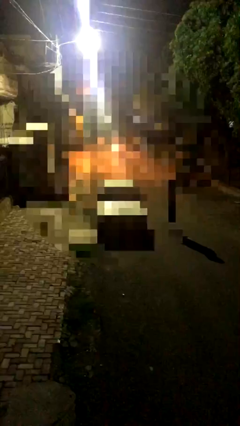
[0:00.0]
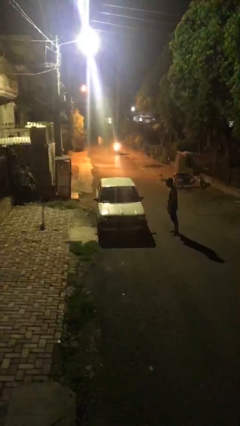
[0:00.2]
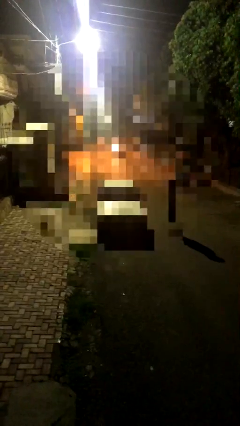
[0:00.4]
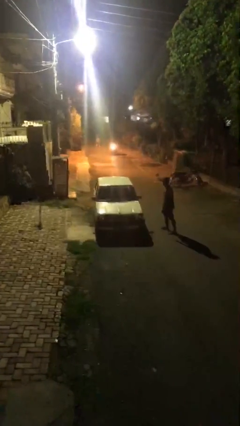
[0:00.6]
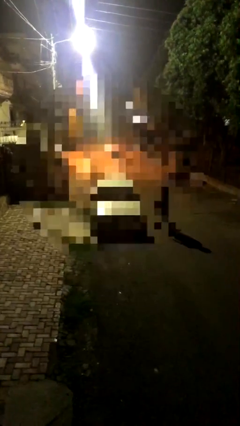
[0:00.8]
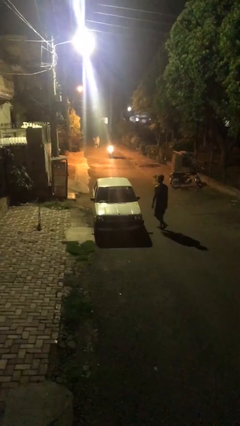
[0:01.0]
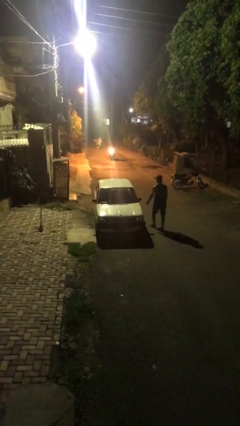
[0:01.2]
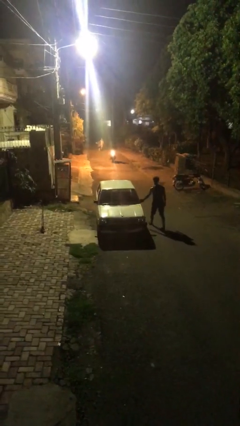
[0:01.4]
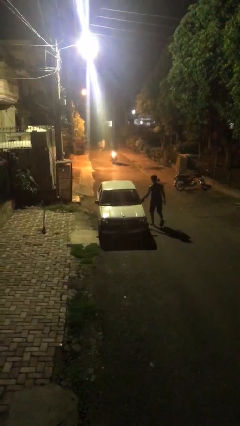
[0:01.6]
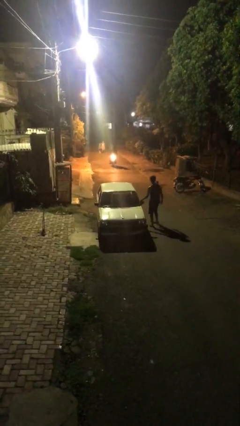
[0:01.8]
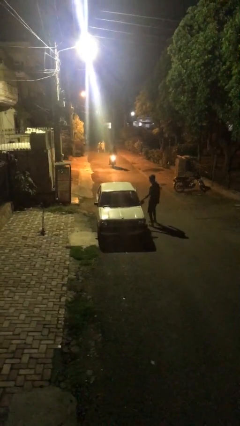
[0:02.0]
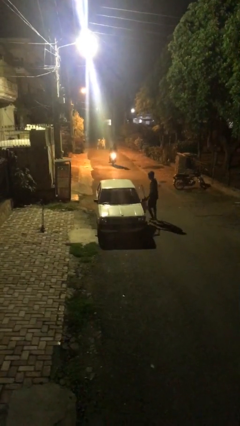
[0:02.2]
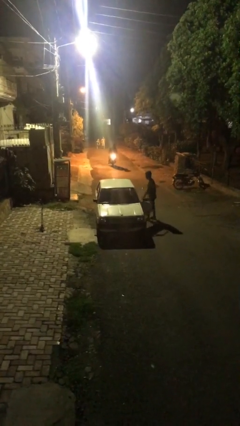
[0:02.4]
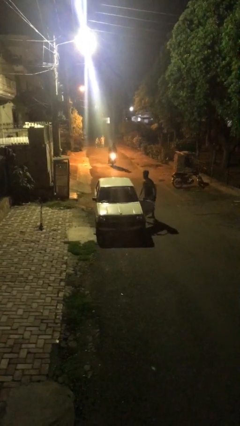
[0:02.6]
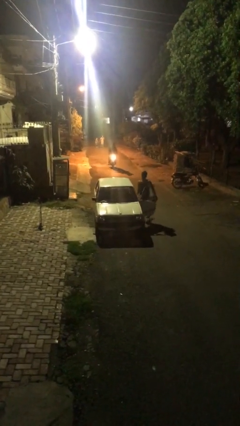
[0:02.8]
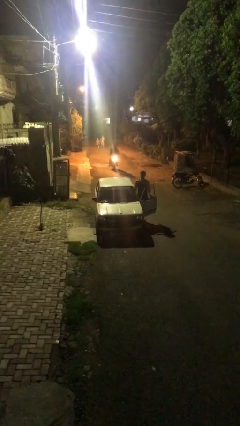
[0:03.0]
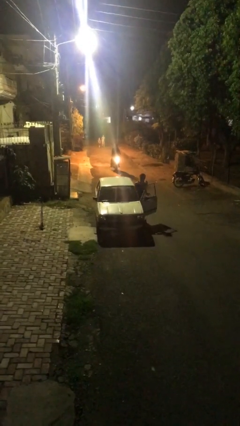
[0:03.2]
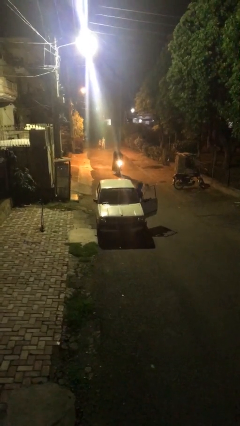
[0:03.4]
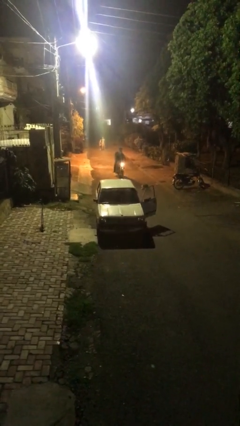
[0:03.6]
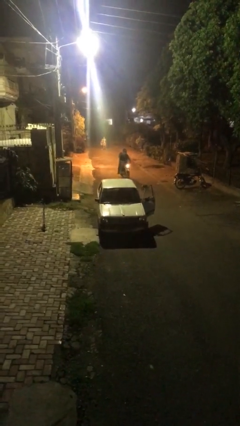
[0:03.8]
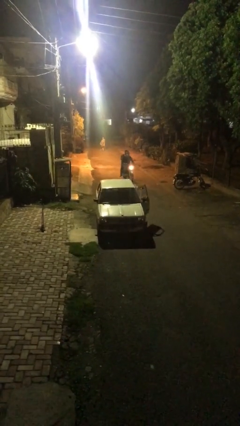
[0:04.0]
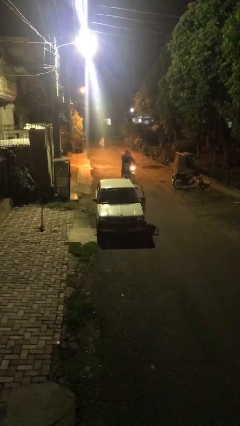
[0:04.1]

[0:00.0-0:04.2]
car picks up person

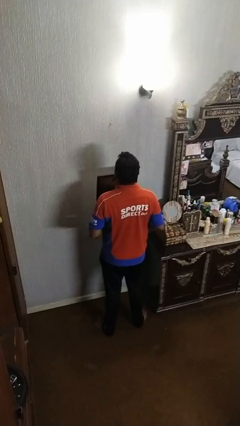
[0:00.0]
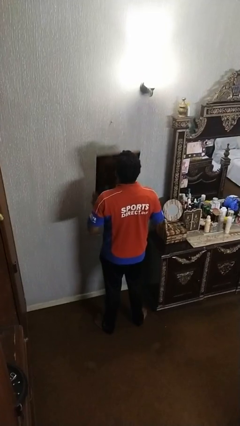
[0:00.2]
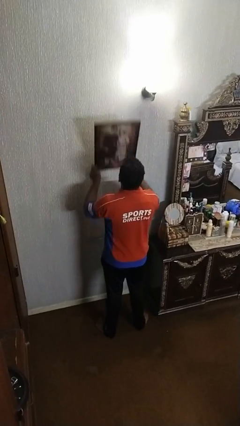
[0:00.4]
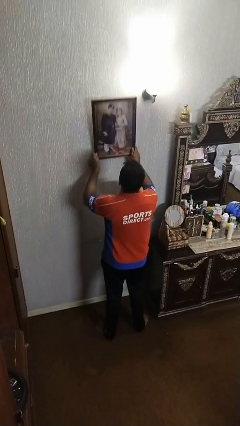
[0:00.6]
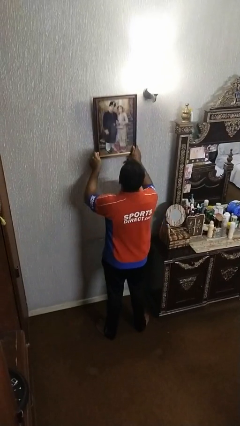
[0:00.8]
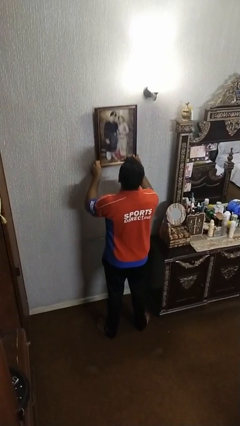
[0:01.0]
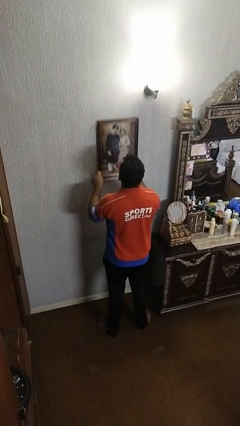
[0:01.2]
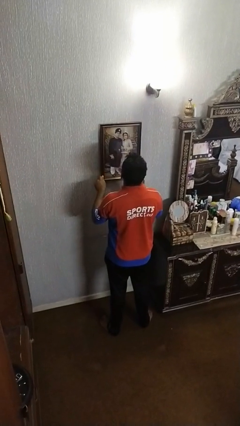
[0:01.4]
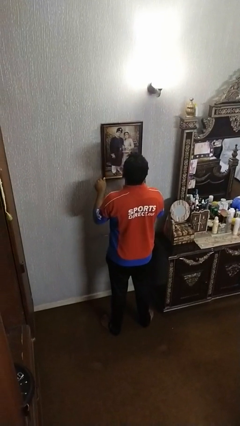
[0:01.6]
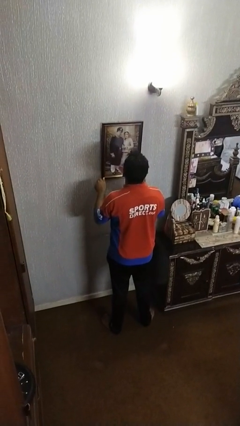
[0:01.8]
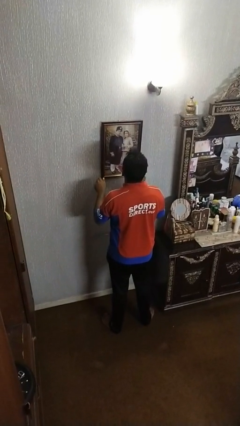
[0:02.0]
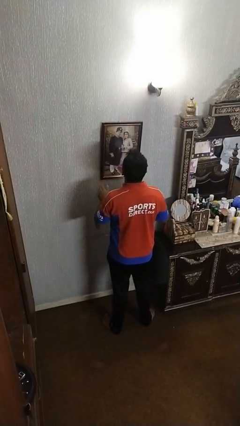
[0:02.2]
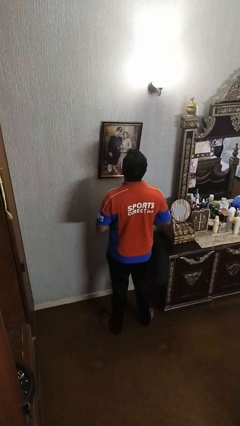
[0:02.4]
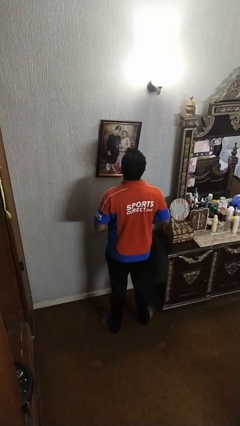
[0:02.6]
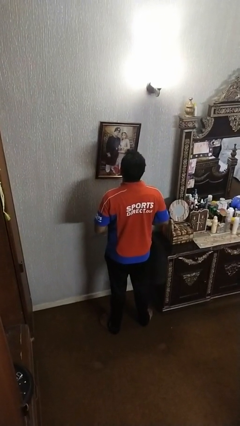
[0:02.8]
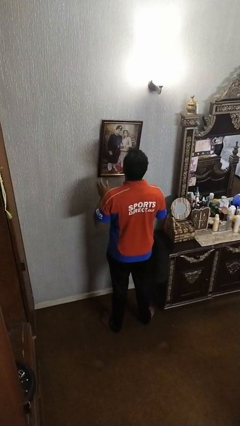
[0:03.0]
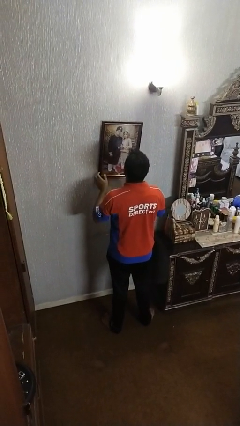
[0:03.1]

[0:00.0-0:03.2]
person puts up picture frame

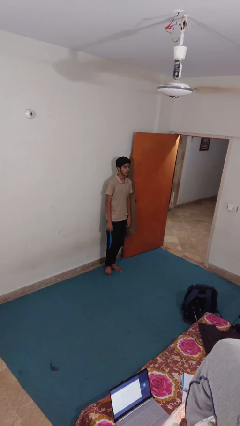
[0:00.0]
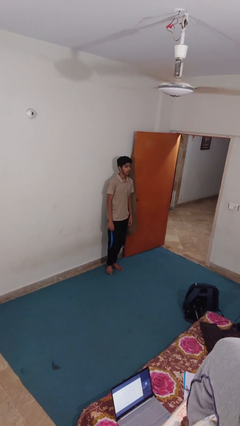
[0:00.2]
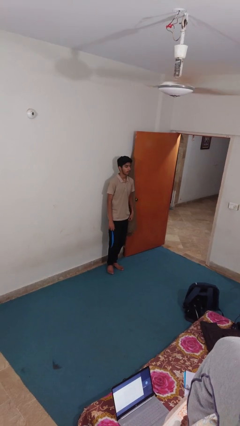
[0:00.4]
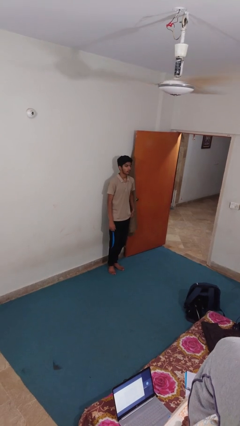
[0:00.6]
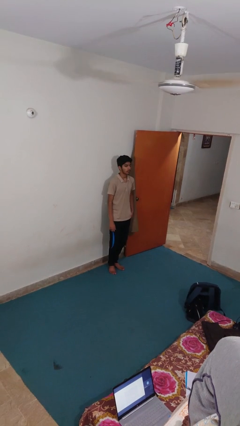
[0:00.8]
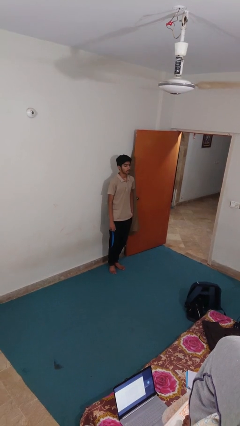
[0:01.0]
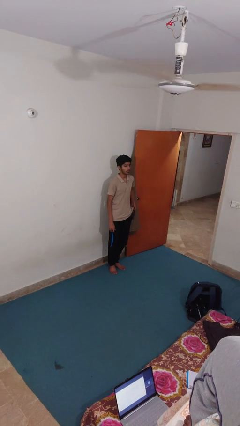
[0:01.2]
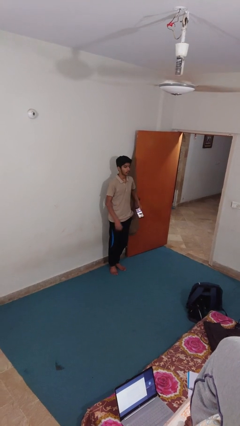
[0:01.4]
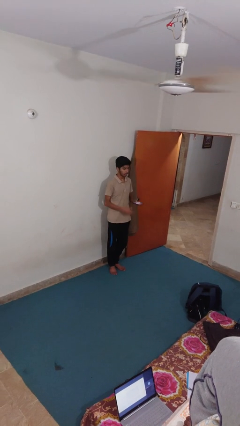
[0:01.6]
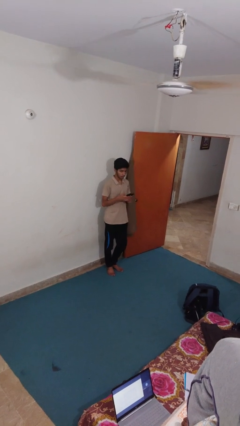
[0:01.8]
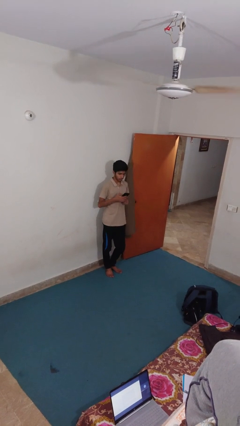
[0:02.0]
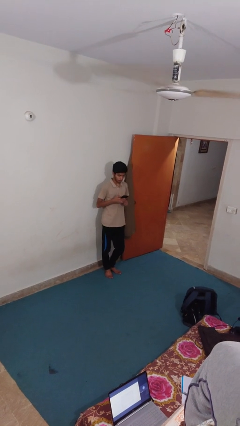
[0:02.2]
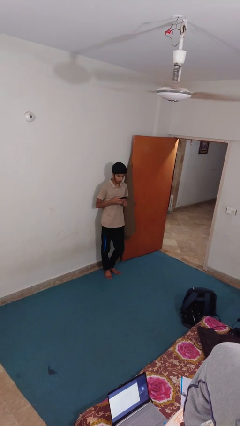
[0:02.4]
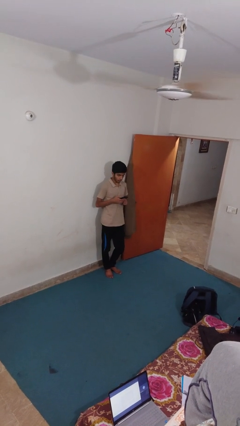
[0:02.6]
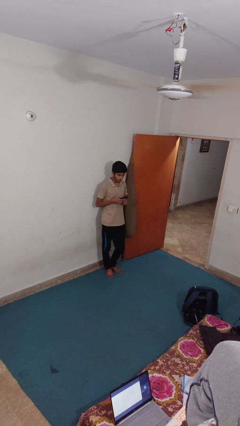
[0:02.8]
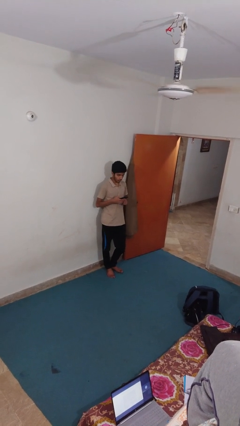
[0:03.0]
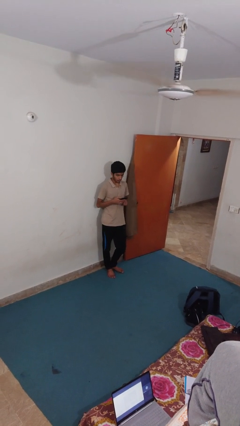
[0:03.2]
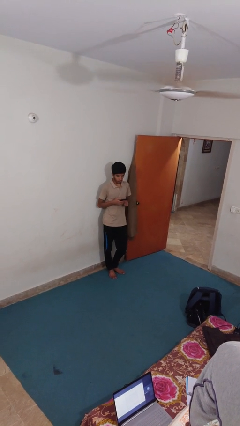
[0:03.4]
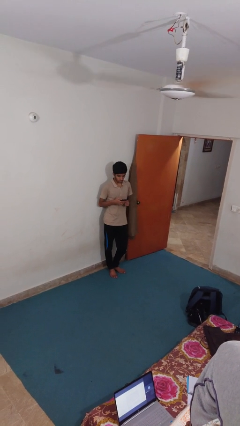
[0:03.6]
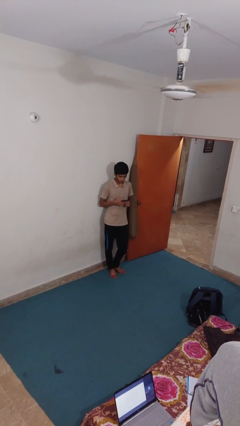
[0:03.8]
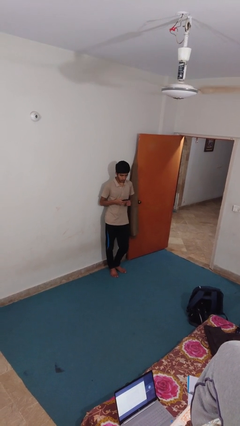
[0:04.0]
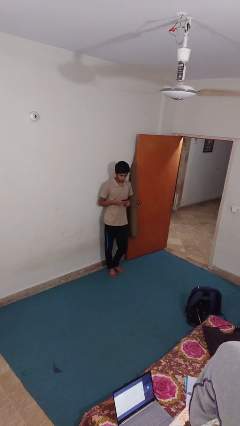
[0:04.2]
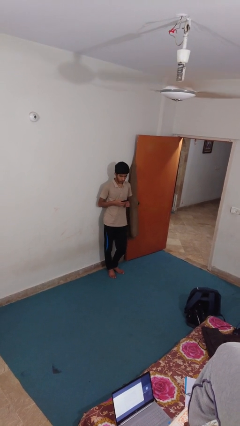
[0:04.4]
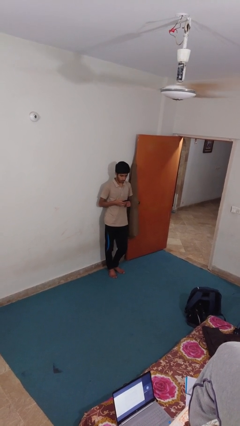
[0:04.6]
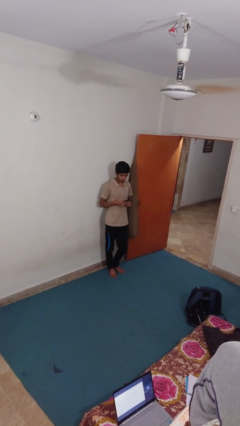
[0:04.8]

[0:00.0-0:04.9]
person takes phone from pocket

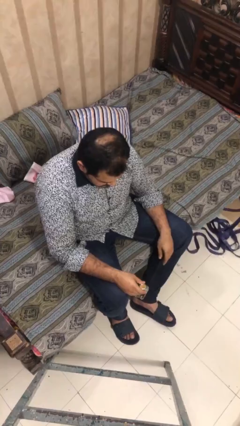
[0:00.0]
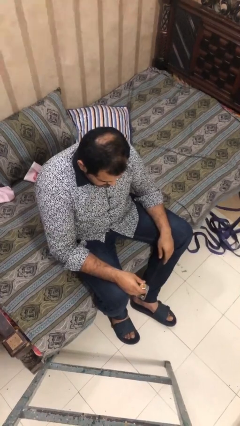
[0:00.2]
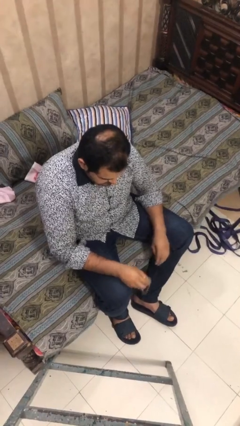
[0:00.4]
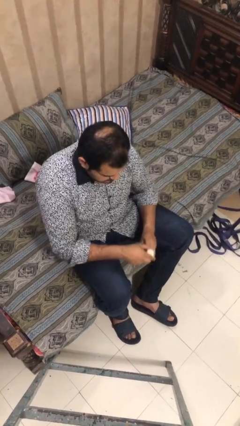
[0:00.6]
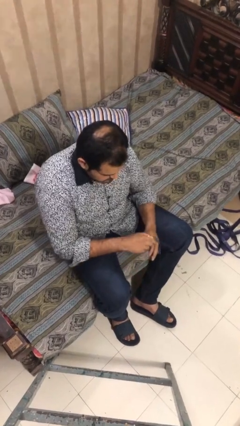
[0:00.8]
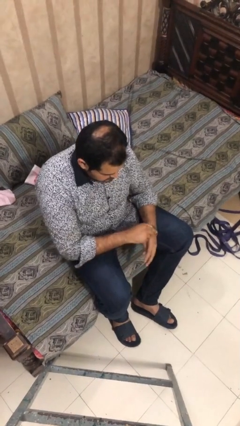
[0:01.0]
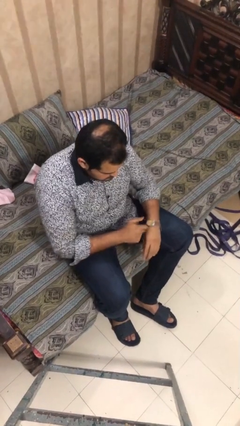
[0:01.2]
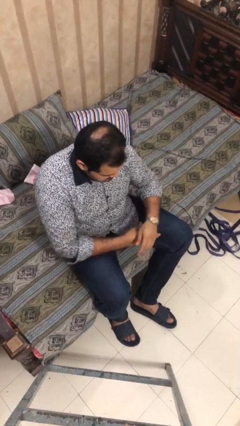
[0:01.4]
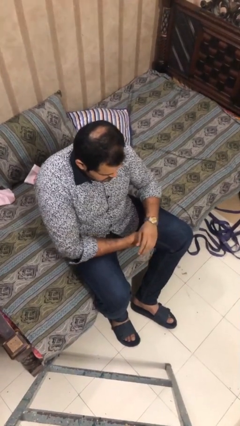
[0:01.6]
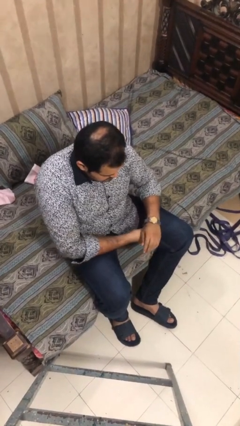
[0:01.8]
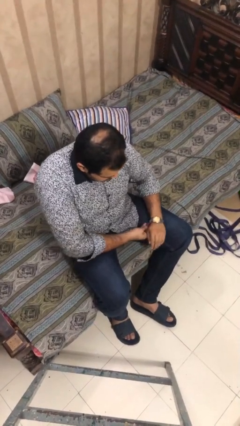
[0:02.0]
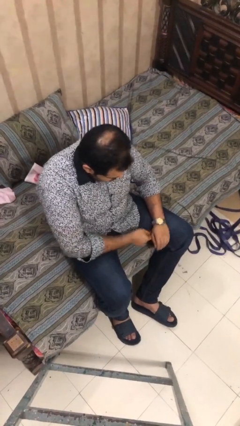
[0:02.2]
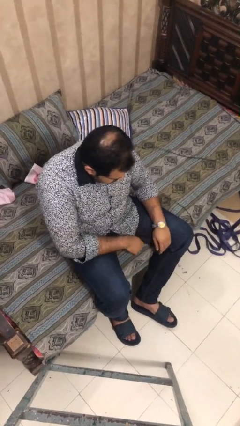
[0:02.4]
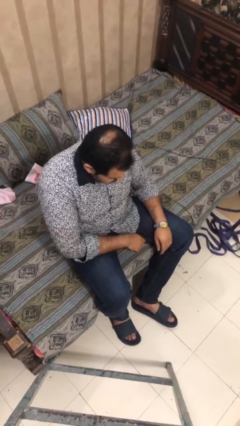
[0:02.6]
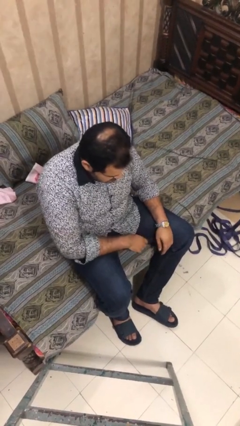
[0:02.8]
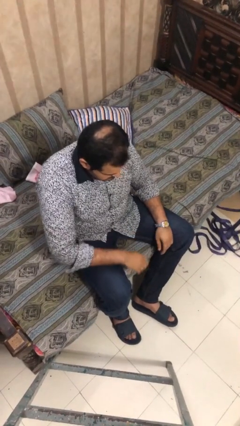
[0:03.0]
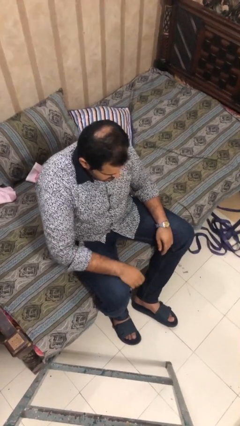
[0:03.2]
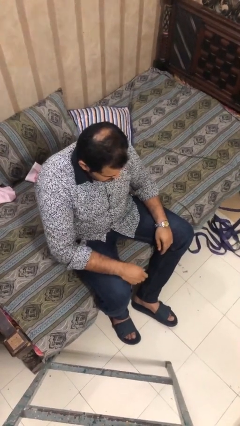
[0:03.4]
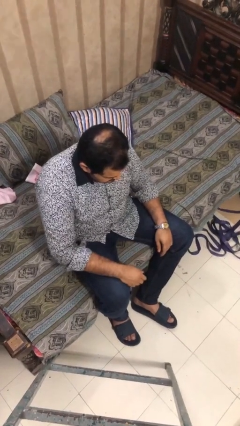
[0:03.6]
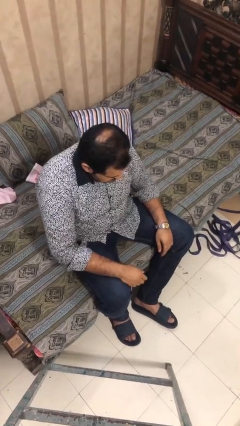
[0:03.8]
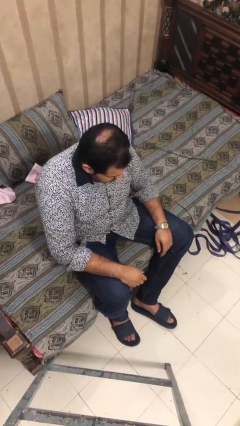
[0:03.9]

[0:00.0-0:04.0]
person puts on wristwatch

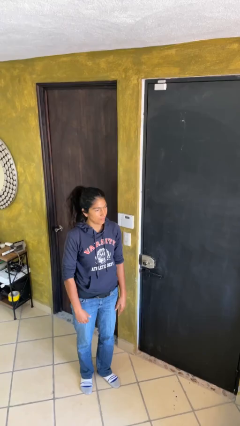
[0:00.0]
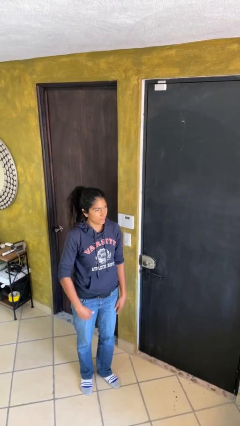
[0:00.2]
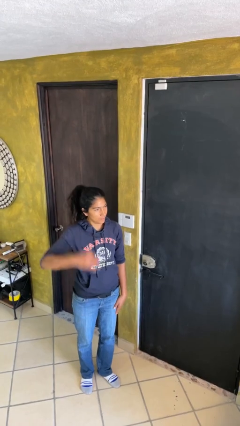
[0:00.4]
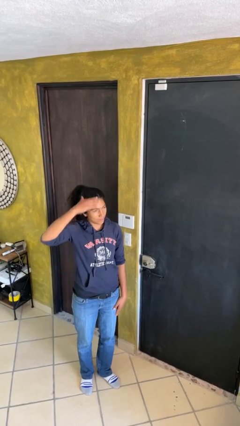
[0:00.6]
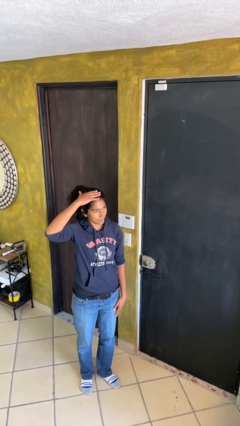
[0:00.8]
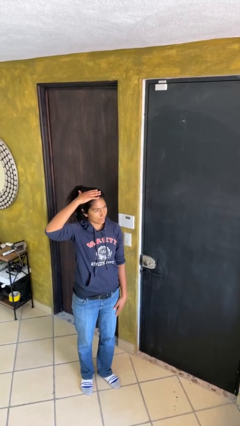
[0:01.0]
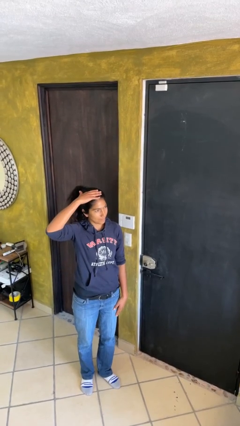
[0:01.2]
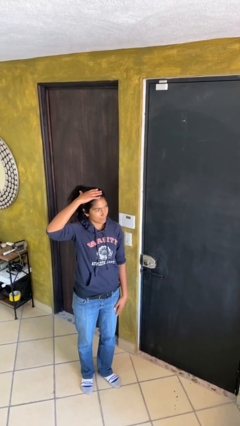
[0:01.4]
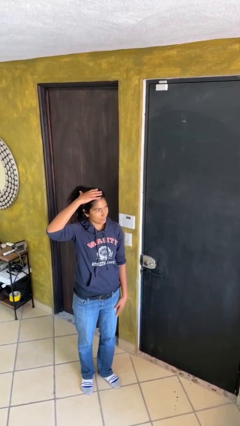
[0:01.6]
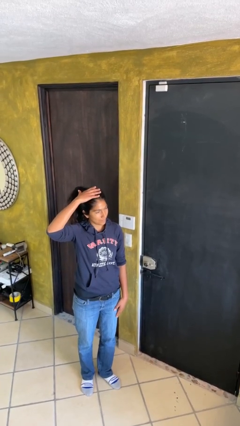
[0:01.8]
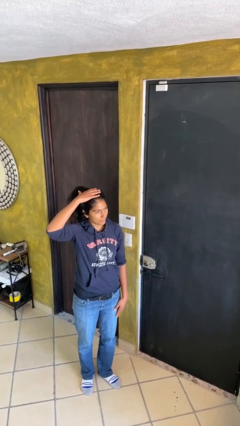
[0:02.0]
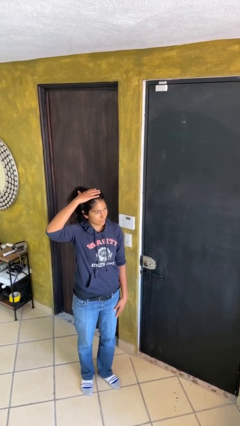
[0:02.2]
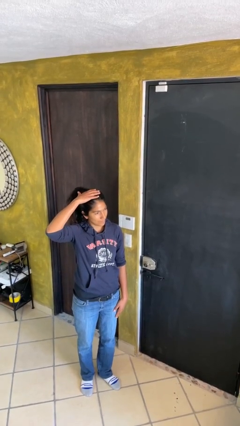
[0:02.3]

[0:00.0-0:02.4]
person pats head
